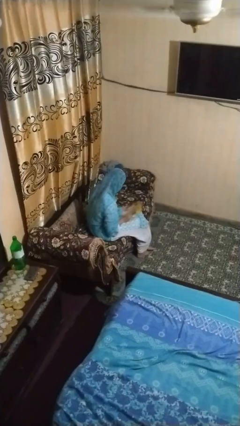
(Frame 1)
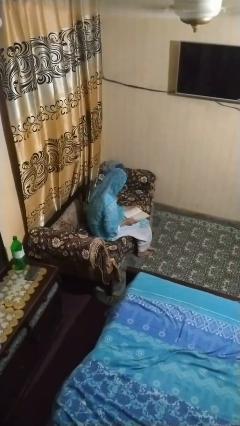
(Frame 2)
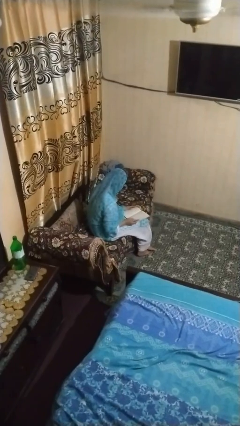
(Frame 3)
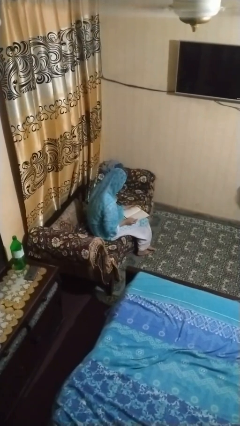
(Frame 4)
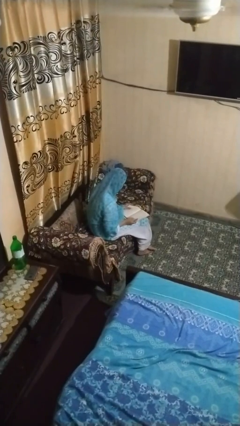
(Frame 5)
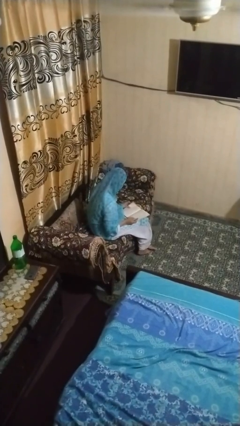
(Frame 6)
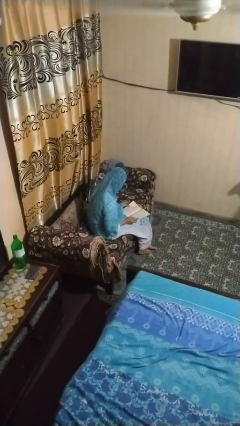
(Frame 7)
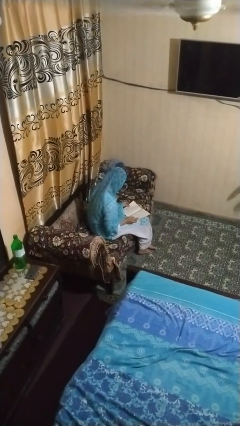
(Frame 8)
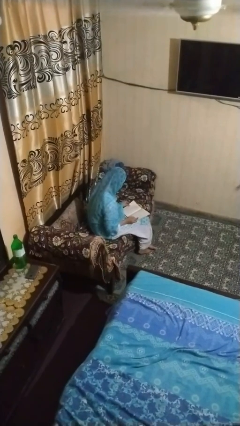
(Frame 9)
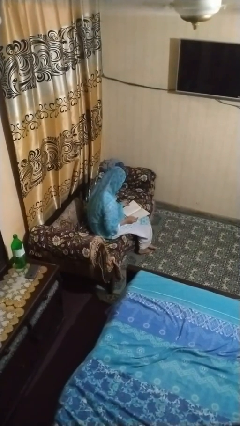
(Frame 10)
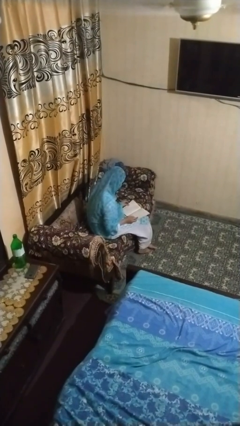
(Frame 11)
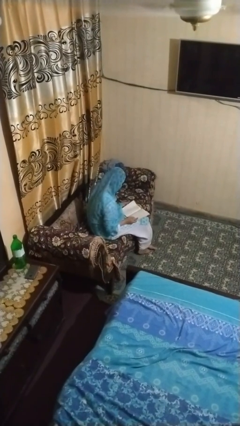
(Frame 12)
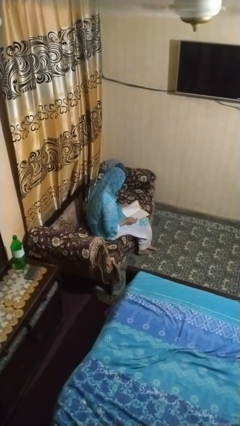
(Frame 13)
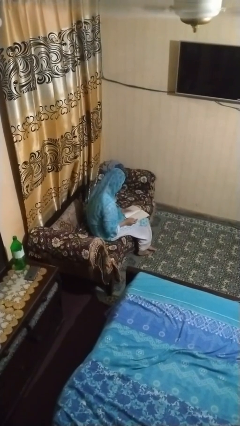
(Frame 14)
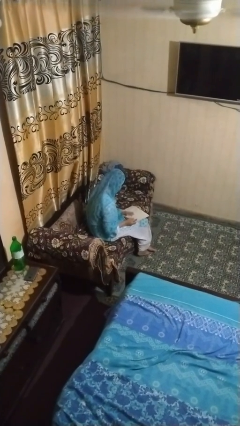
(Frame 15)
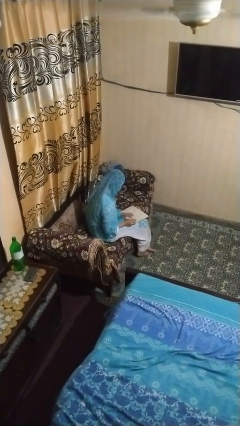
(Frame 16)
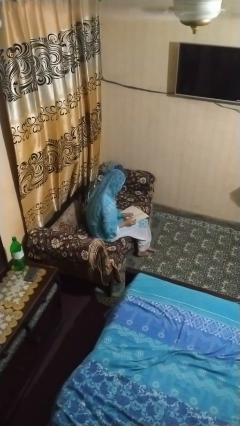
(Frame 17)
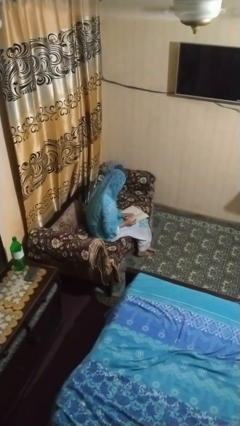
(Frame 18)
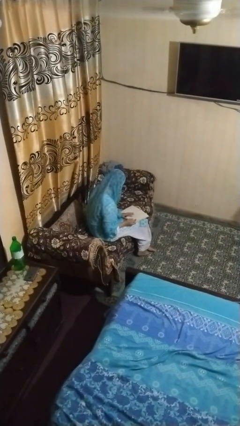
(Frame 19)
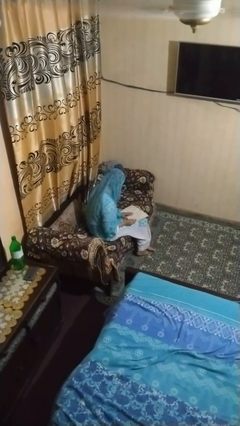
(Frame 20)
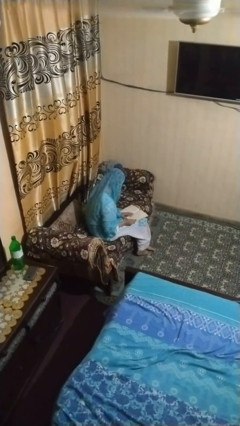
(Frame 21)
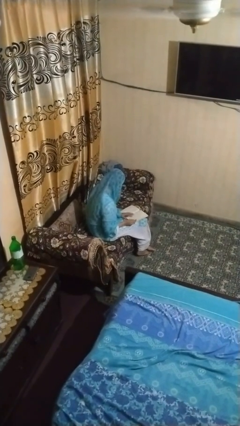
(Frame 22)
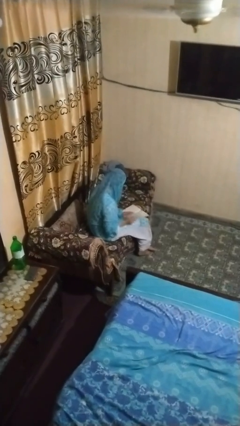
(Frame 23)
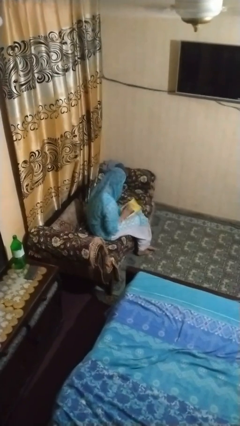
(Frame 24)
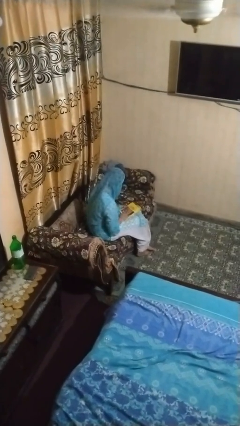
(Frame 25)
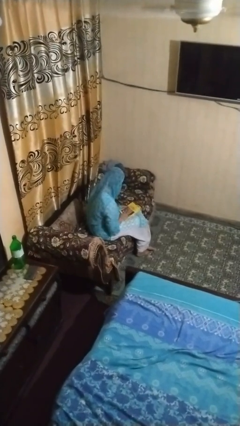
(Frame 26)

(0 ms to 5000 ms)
person reads book

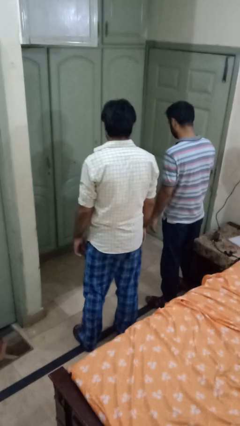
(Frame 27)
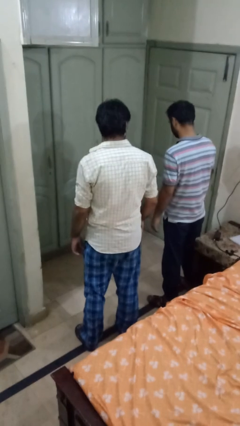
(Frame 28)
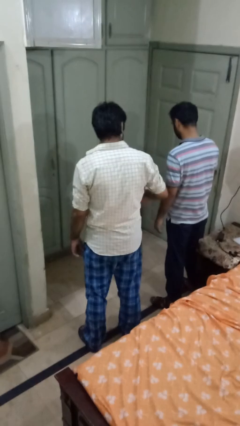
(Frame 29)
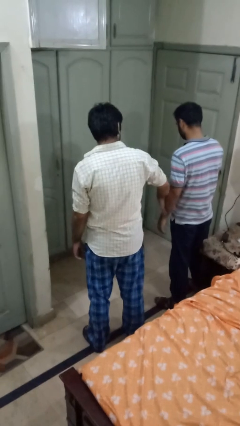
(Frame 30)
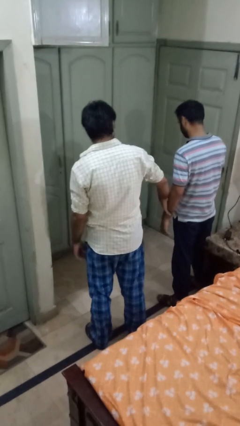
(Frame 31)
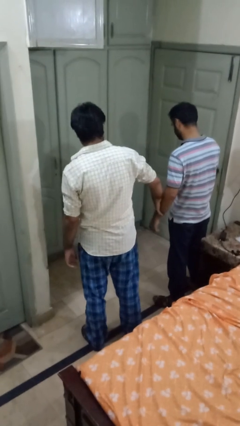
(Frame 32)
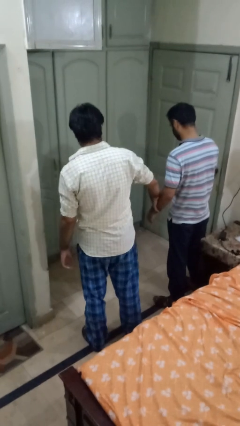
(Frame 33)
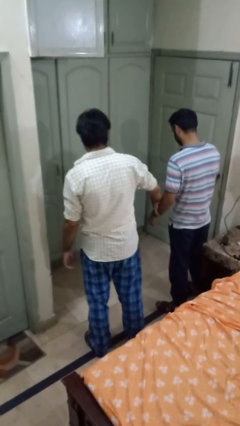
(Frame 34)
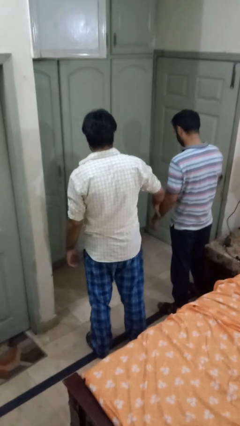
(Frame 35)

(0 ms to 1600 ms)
person grabs person by forearm

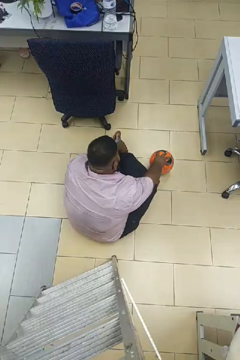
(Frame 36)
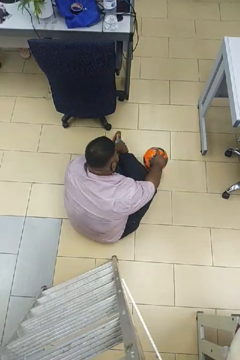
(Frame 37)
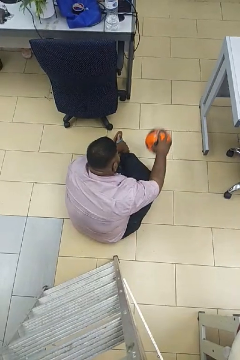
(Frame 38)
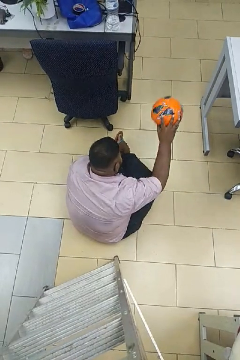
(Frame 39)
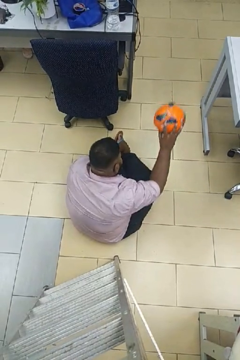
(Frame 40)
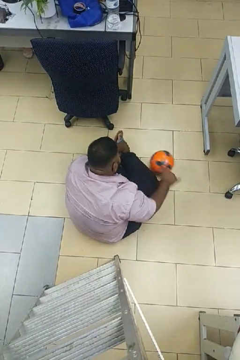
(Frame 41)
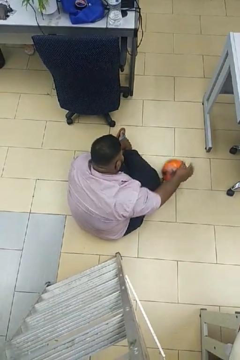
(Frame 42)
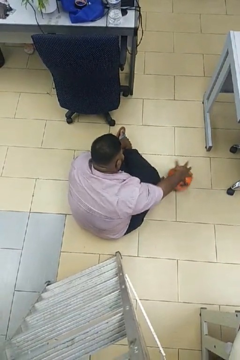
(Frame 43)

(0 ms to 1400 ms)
person bounces ball on floor

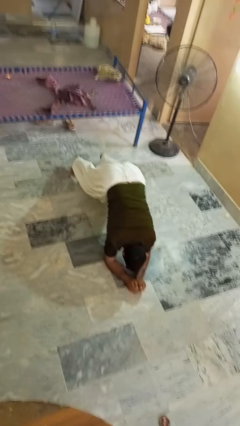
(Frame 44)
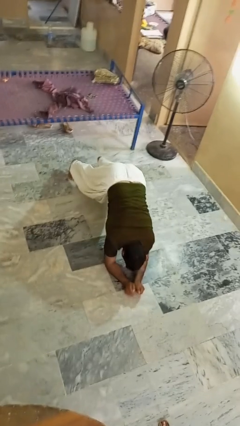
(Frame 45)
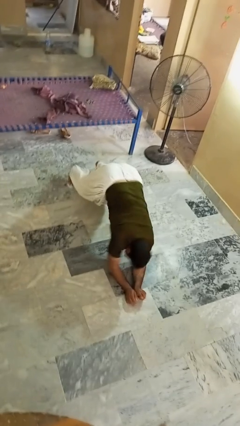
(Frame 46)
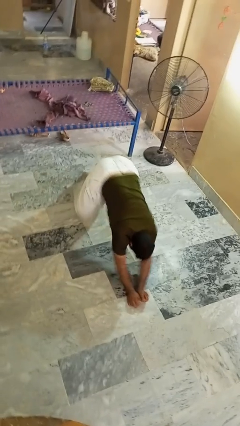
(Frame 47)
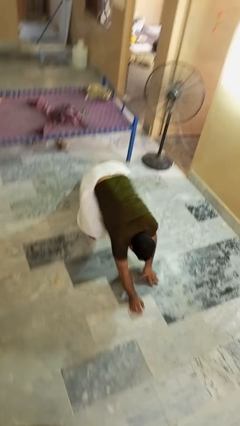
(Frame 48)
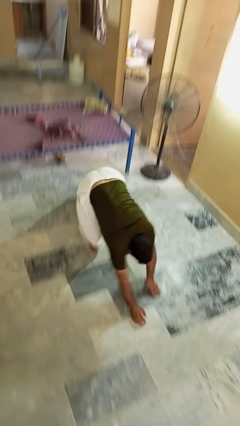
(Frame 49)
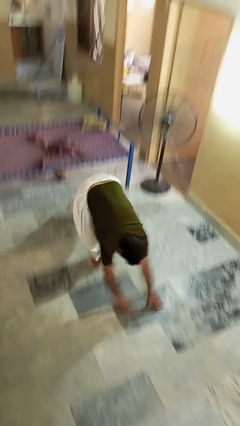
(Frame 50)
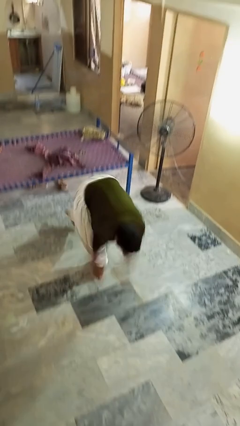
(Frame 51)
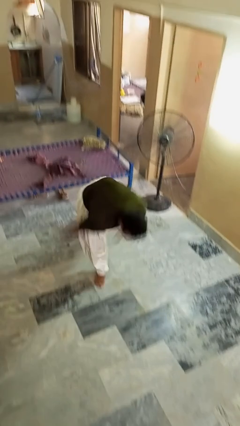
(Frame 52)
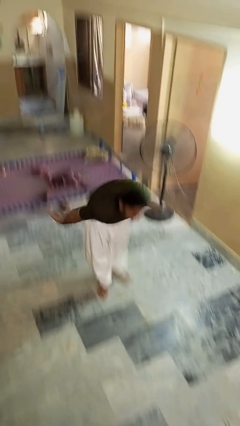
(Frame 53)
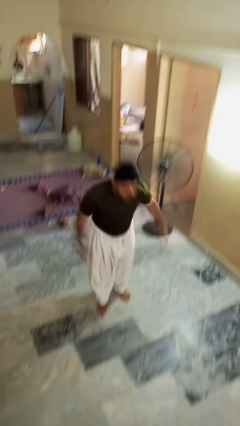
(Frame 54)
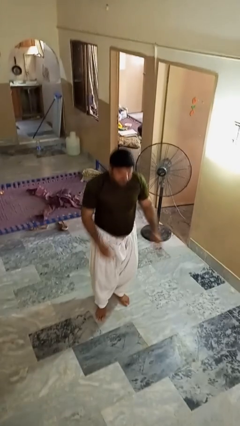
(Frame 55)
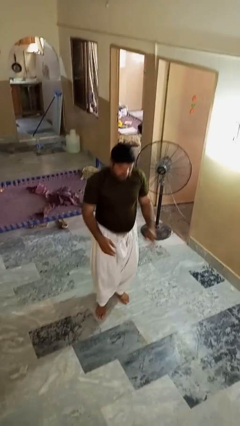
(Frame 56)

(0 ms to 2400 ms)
person stands up from floor

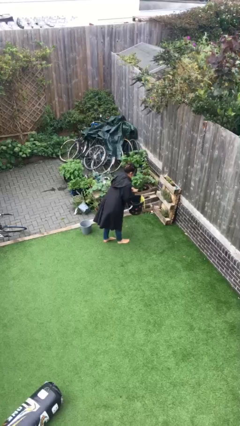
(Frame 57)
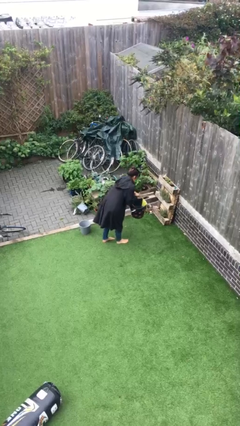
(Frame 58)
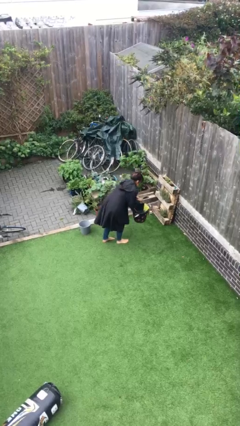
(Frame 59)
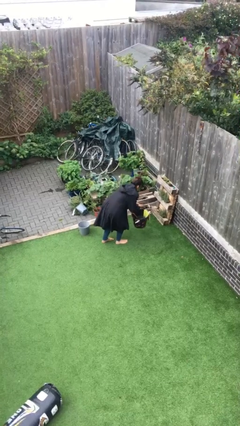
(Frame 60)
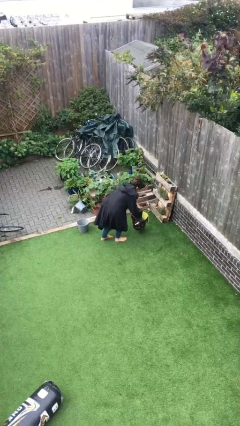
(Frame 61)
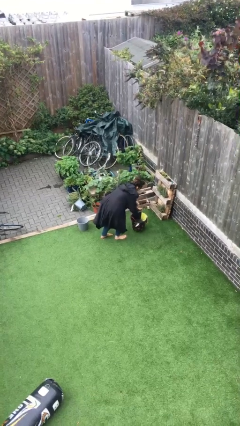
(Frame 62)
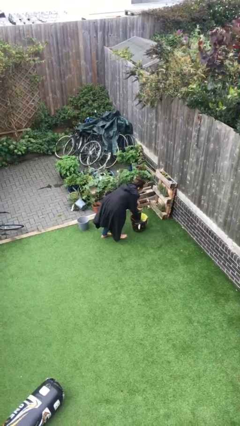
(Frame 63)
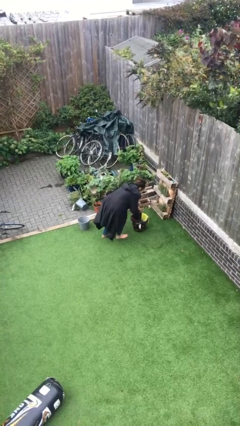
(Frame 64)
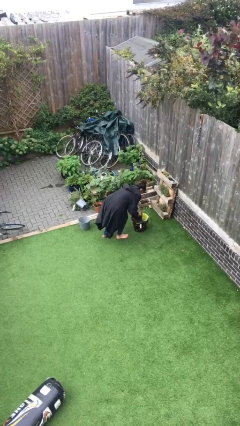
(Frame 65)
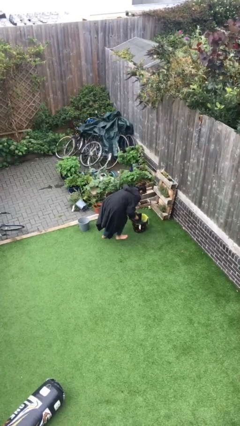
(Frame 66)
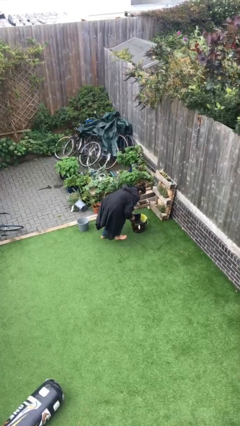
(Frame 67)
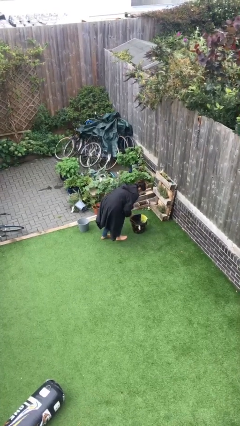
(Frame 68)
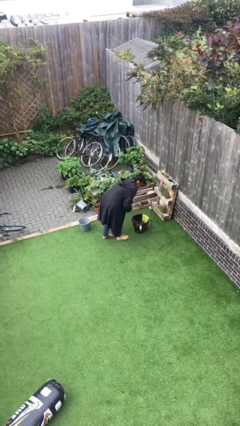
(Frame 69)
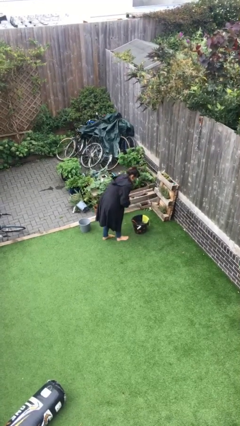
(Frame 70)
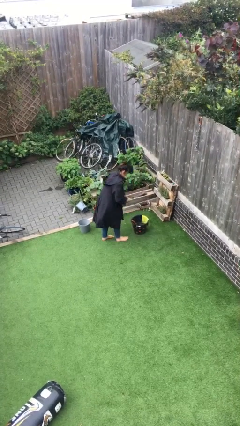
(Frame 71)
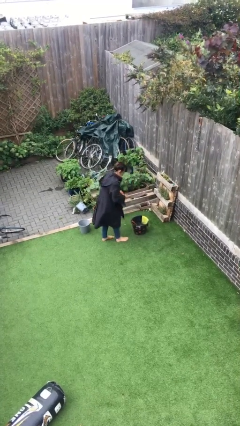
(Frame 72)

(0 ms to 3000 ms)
person puts down object on floor

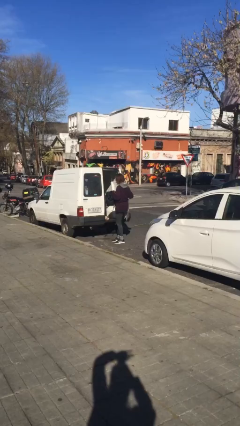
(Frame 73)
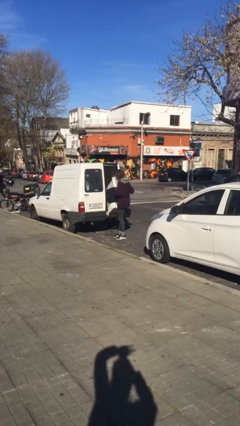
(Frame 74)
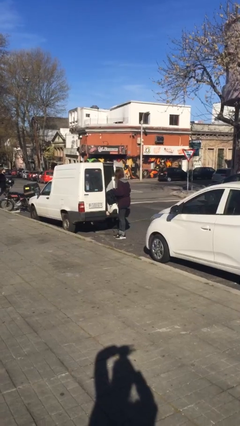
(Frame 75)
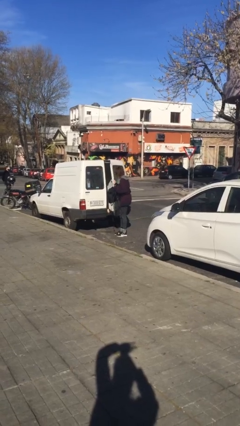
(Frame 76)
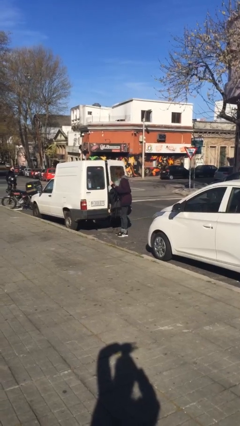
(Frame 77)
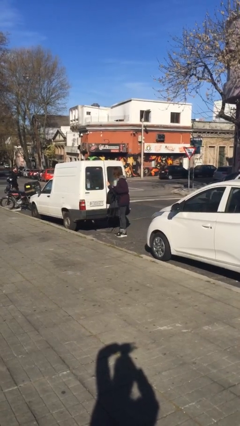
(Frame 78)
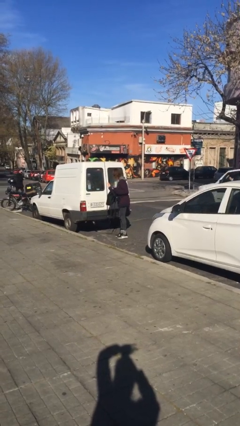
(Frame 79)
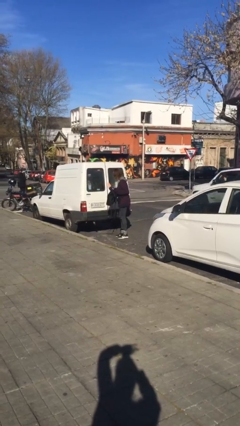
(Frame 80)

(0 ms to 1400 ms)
person closes car door

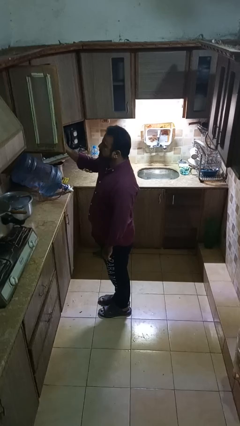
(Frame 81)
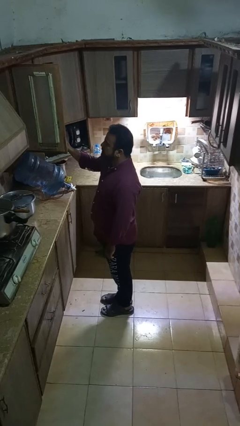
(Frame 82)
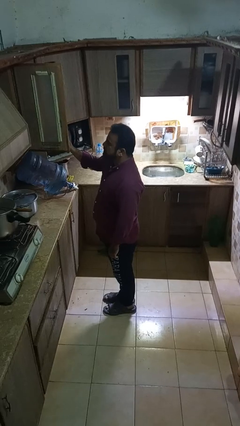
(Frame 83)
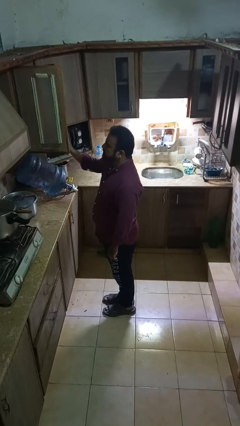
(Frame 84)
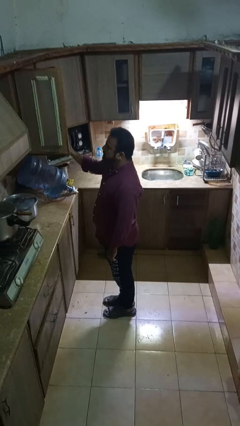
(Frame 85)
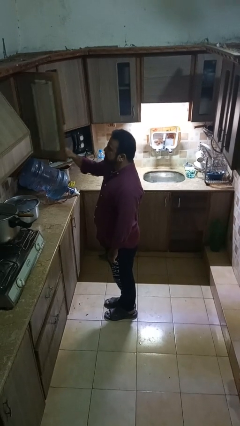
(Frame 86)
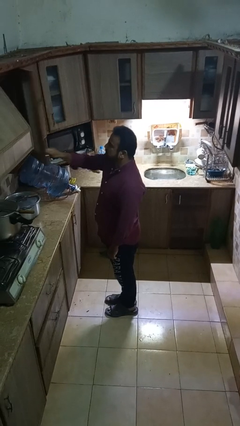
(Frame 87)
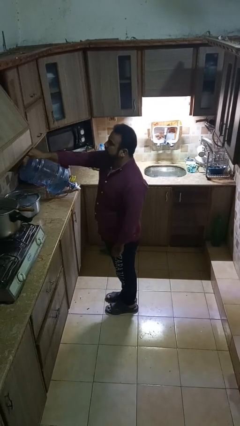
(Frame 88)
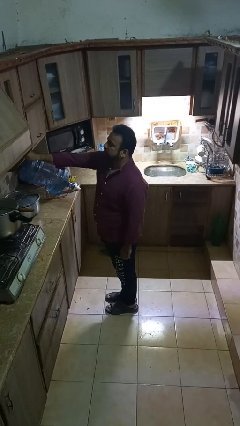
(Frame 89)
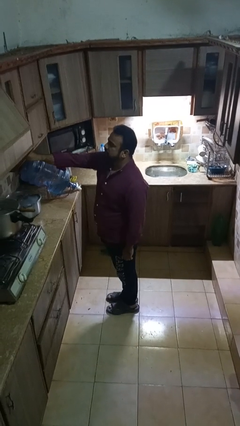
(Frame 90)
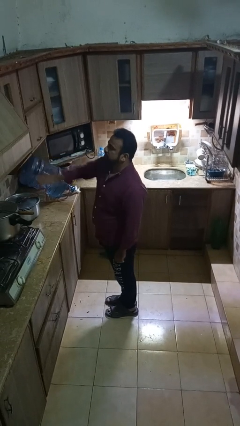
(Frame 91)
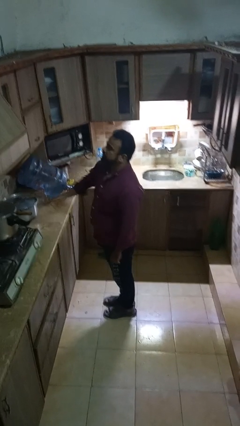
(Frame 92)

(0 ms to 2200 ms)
person closes cabinet

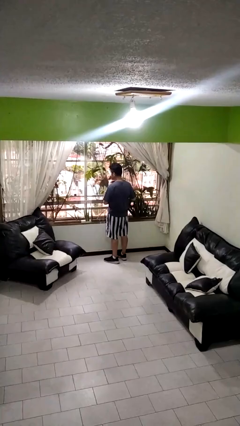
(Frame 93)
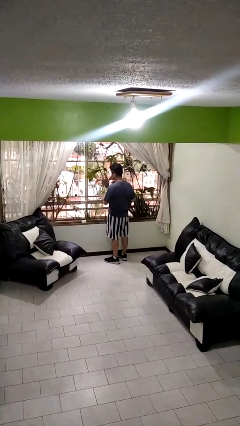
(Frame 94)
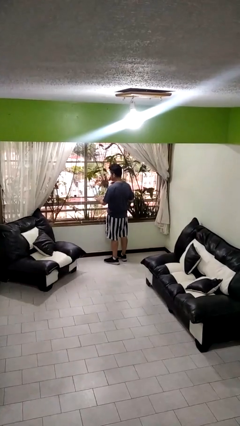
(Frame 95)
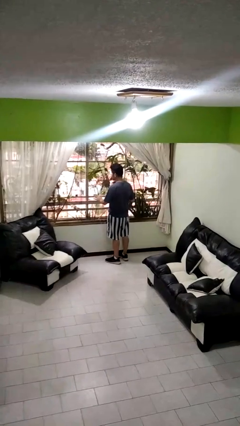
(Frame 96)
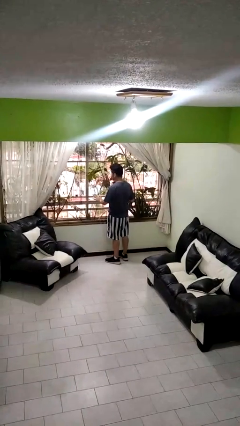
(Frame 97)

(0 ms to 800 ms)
person closes home window
